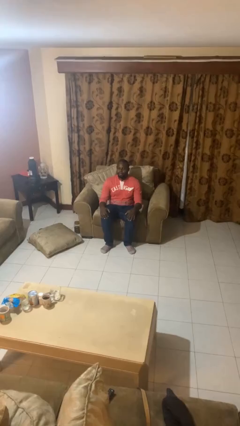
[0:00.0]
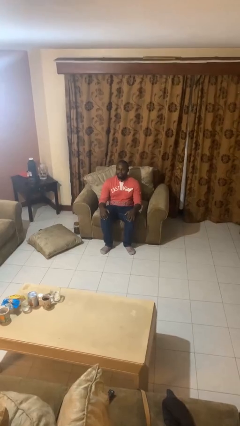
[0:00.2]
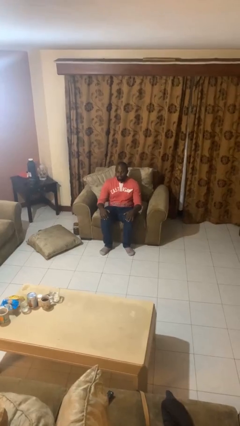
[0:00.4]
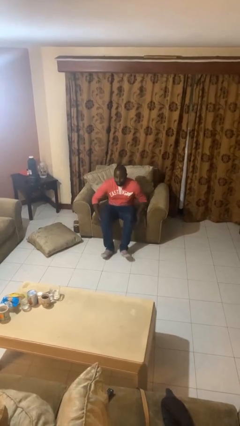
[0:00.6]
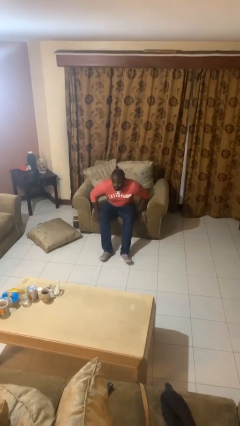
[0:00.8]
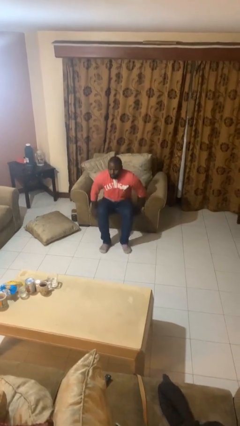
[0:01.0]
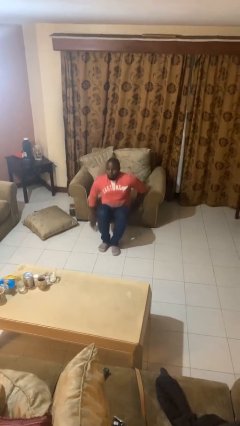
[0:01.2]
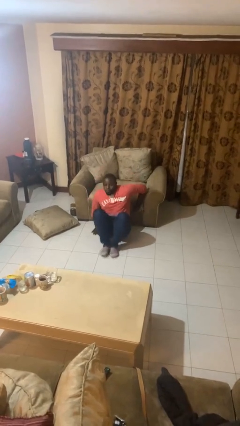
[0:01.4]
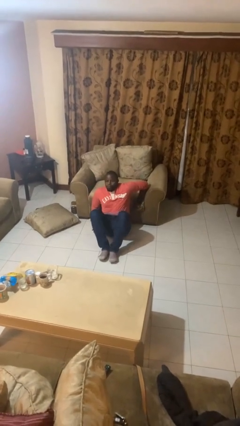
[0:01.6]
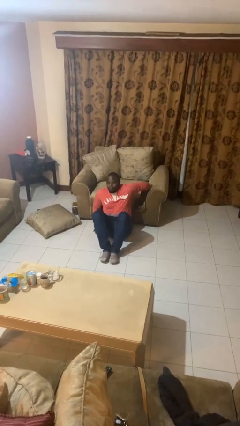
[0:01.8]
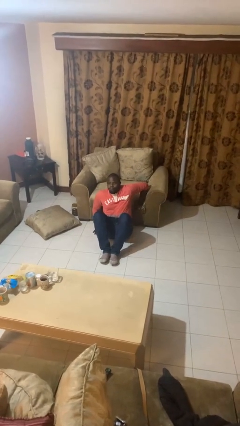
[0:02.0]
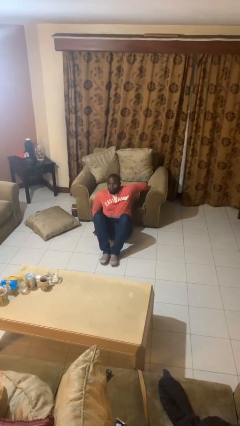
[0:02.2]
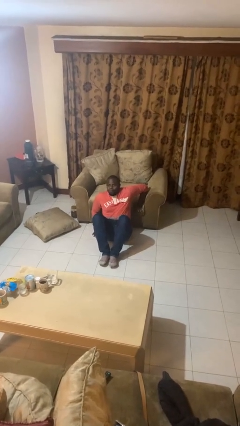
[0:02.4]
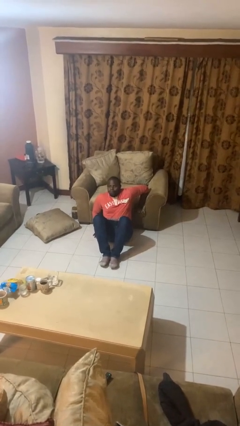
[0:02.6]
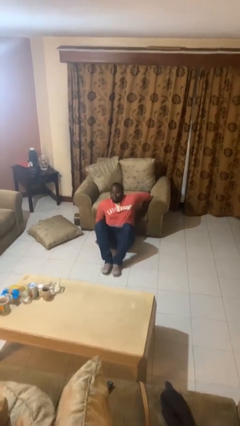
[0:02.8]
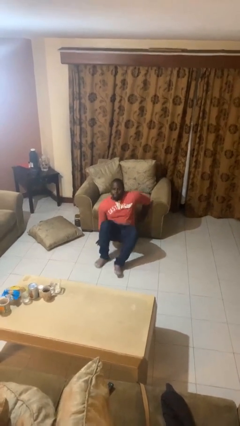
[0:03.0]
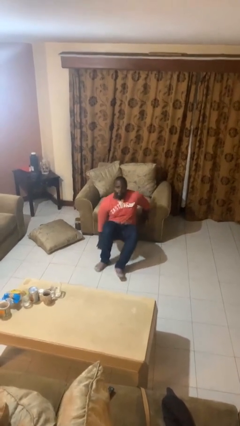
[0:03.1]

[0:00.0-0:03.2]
person falls from chair

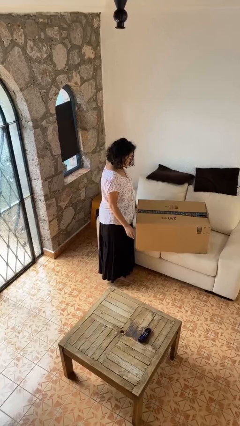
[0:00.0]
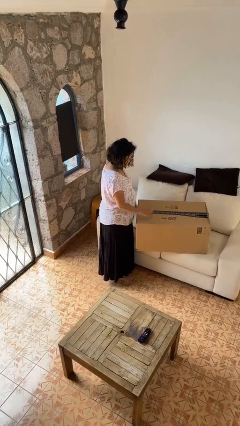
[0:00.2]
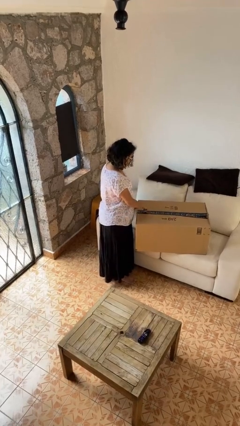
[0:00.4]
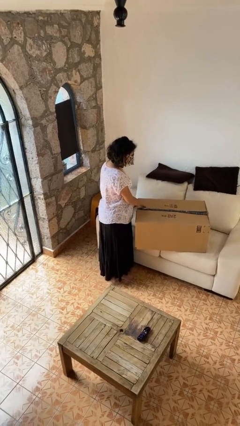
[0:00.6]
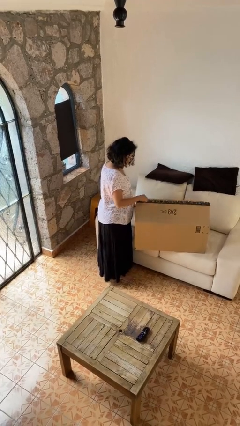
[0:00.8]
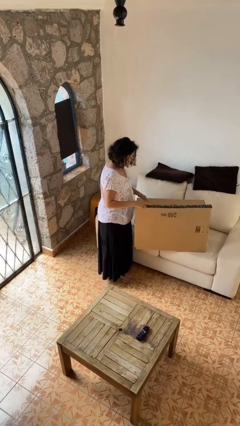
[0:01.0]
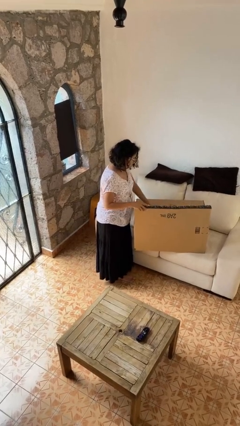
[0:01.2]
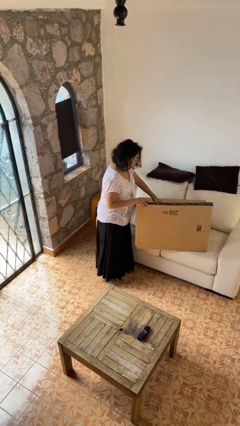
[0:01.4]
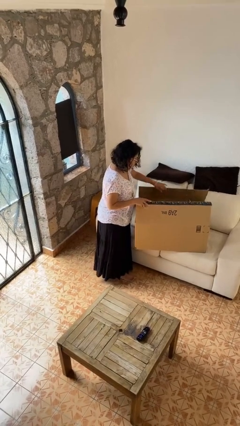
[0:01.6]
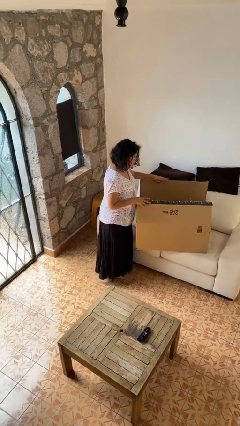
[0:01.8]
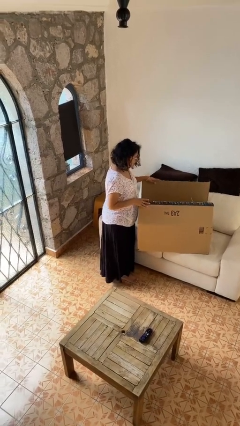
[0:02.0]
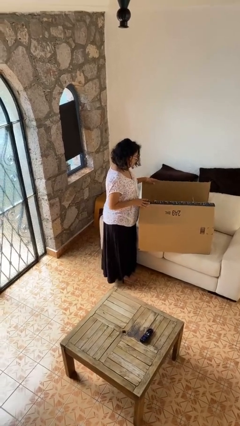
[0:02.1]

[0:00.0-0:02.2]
person opens box

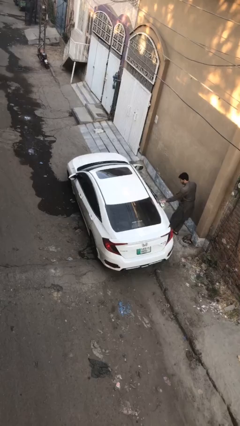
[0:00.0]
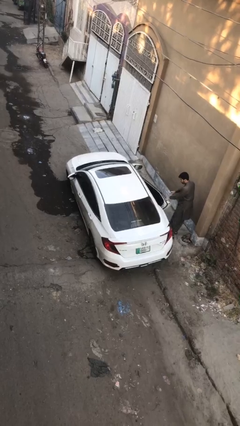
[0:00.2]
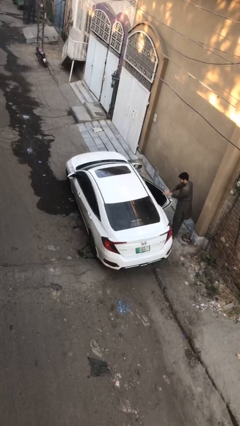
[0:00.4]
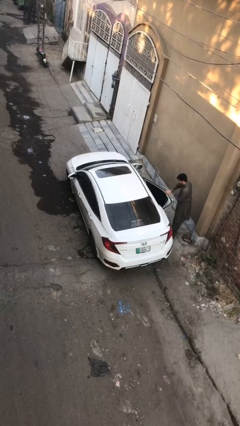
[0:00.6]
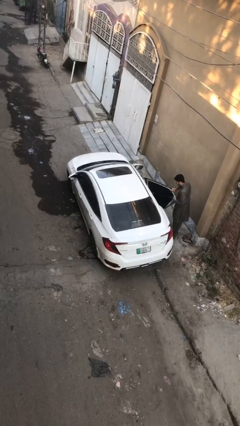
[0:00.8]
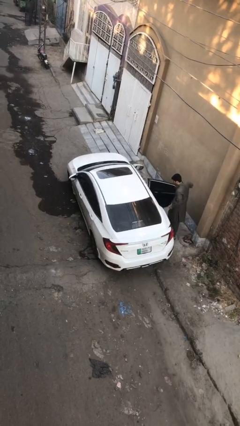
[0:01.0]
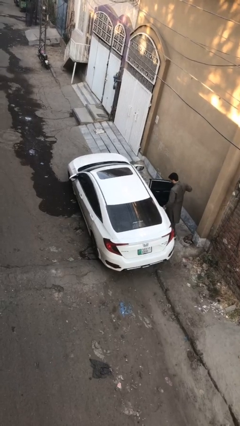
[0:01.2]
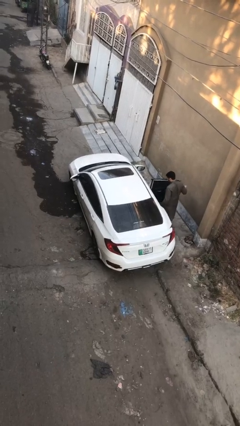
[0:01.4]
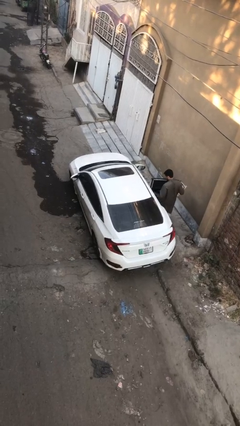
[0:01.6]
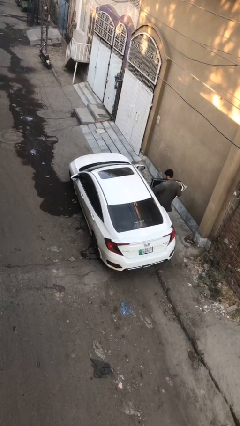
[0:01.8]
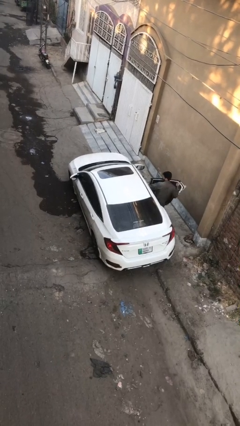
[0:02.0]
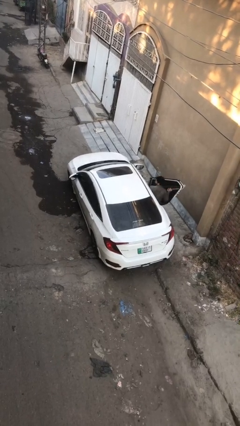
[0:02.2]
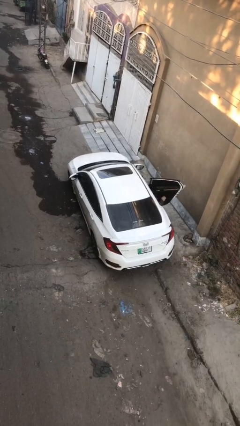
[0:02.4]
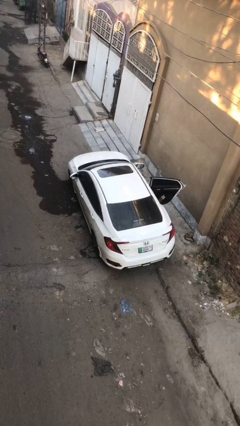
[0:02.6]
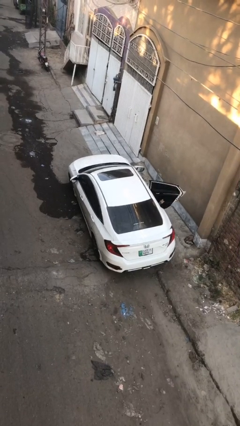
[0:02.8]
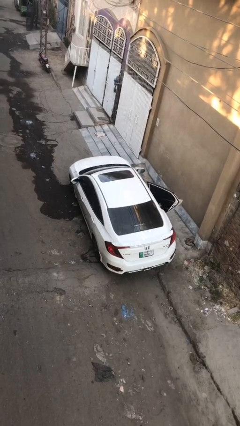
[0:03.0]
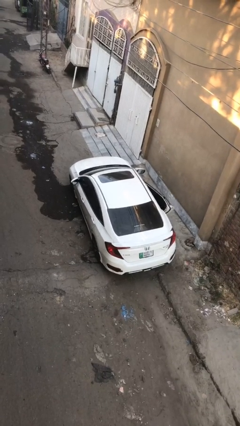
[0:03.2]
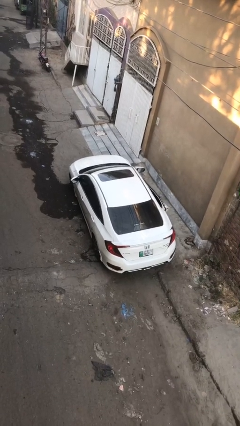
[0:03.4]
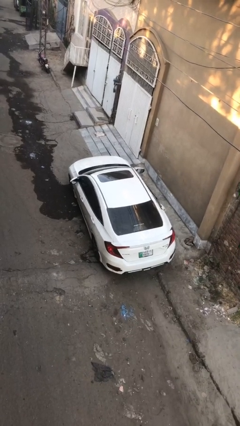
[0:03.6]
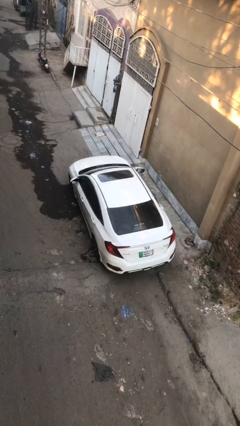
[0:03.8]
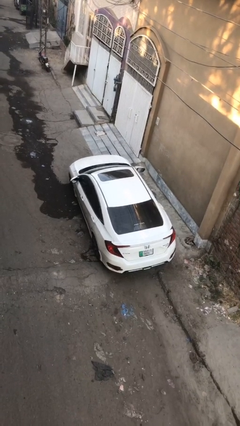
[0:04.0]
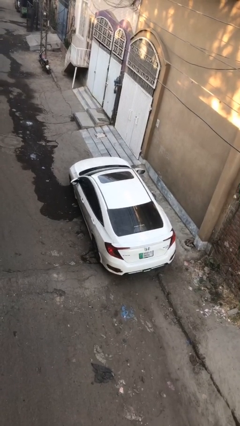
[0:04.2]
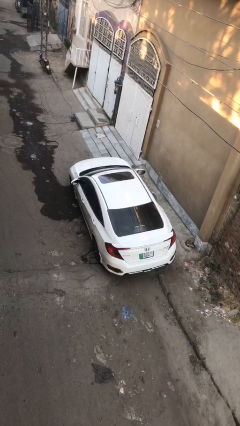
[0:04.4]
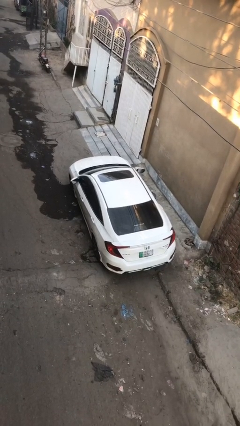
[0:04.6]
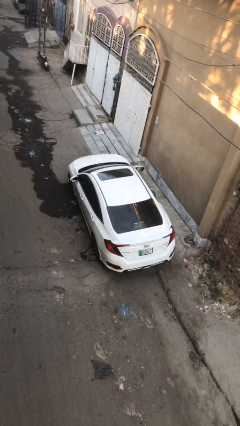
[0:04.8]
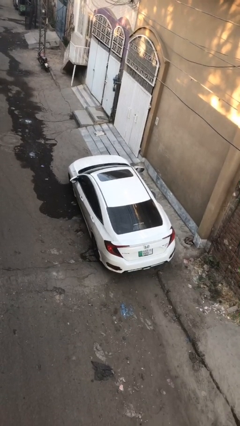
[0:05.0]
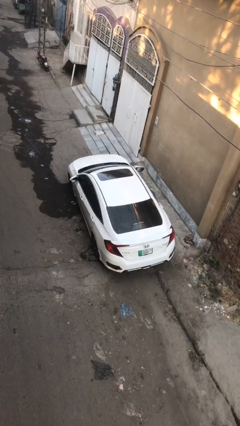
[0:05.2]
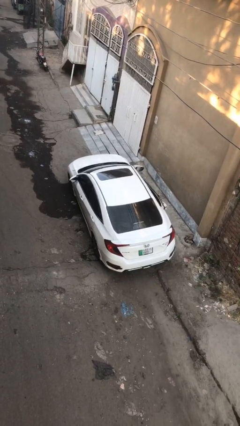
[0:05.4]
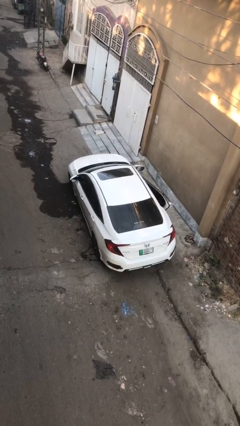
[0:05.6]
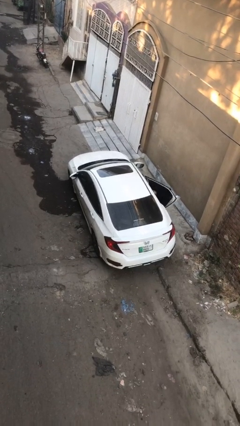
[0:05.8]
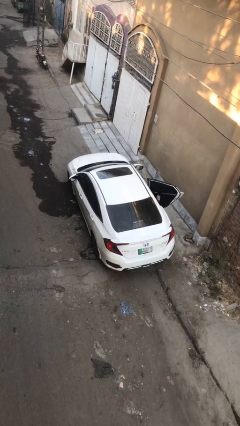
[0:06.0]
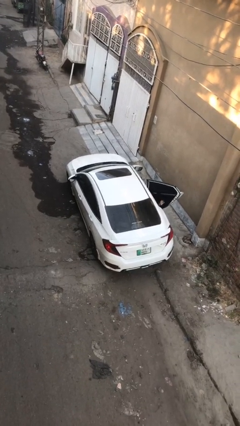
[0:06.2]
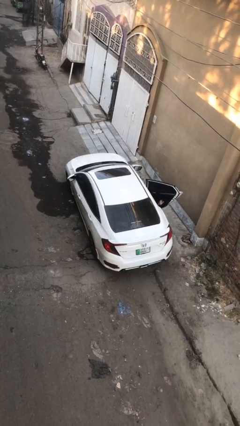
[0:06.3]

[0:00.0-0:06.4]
car picks up person

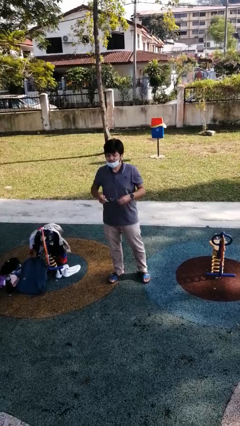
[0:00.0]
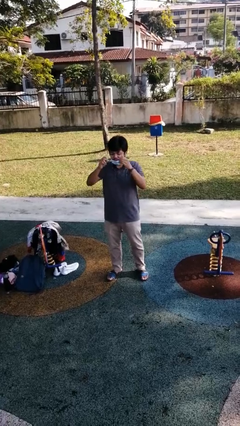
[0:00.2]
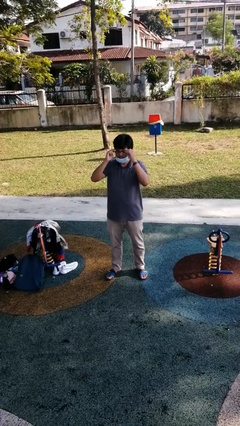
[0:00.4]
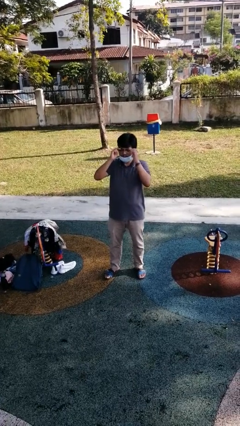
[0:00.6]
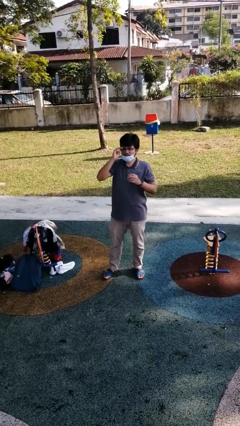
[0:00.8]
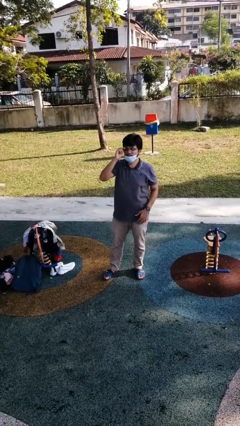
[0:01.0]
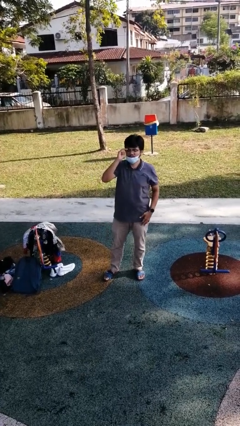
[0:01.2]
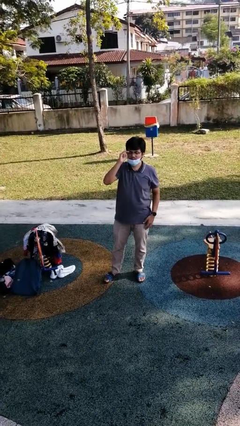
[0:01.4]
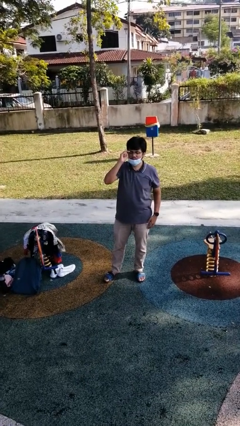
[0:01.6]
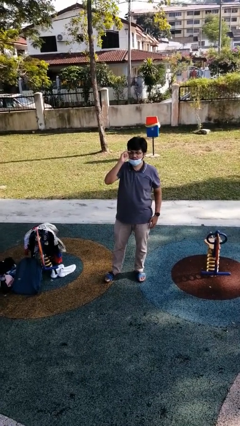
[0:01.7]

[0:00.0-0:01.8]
person puts on glasses

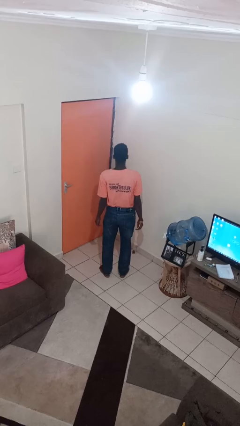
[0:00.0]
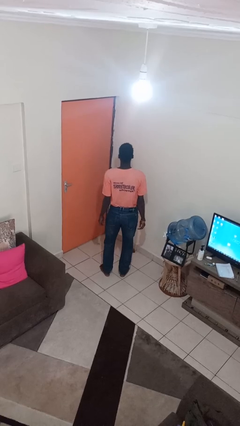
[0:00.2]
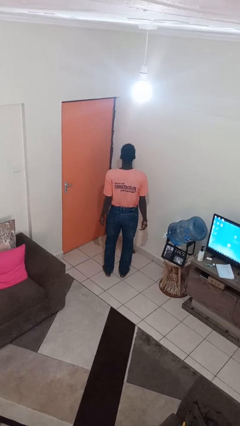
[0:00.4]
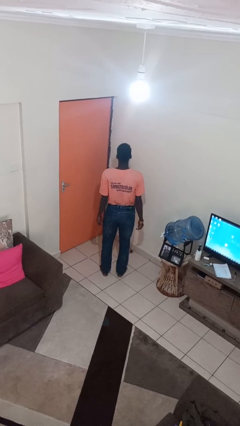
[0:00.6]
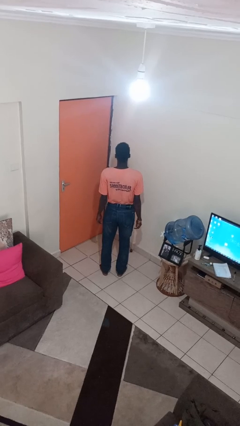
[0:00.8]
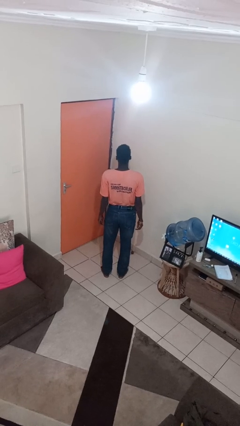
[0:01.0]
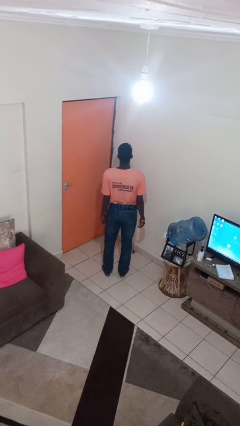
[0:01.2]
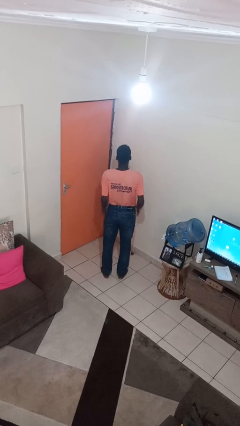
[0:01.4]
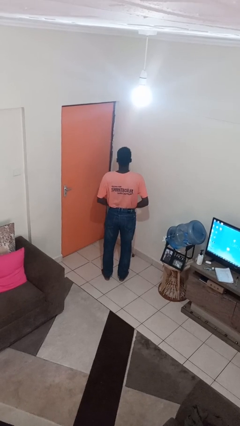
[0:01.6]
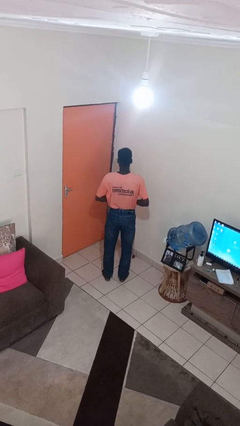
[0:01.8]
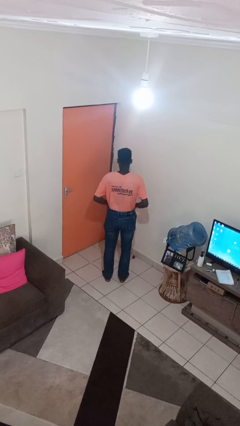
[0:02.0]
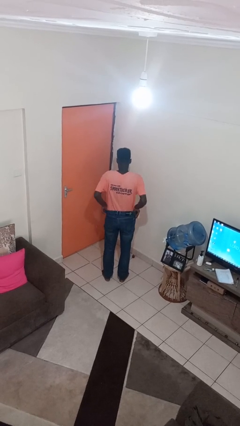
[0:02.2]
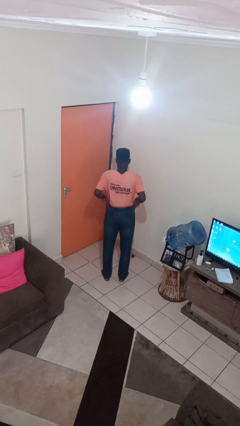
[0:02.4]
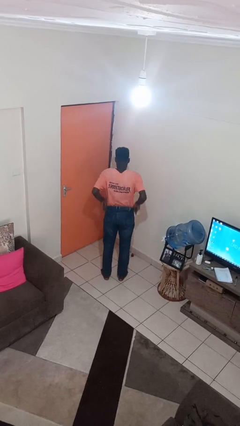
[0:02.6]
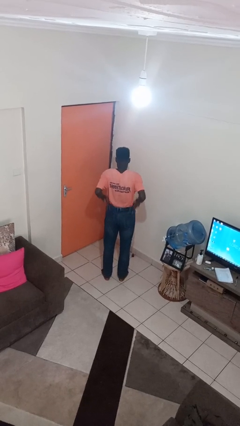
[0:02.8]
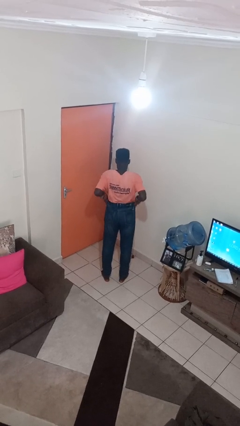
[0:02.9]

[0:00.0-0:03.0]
person hikes up pants

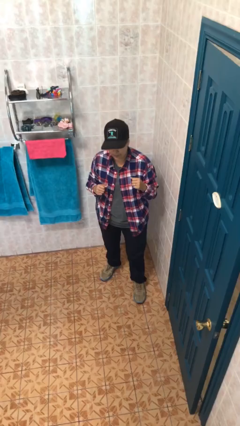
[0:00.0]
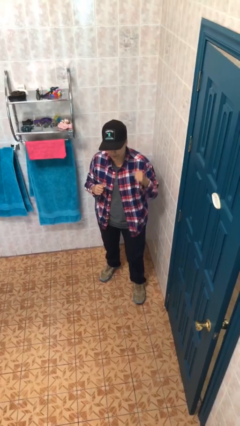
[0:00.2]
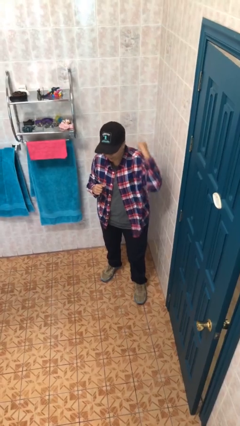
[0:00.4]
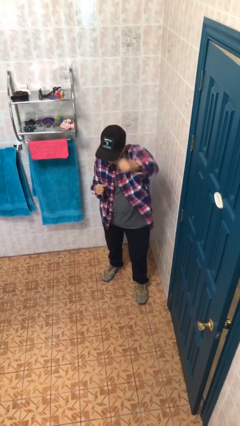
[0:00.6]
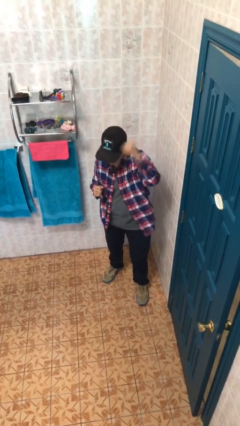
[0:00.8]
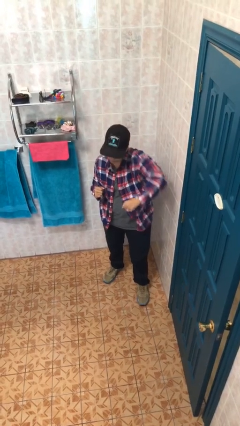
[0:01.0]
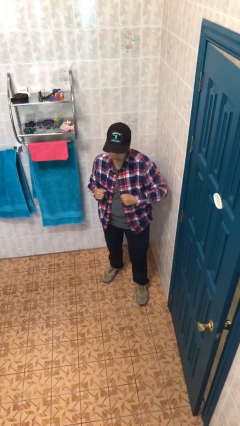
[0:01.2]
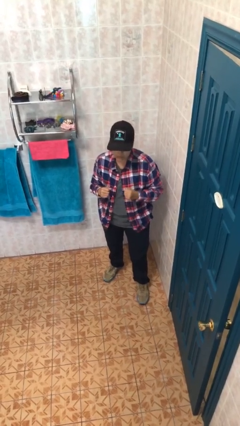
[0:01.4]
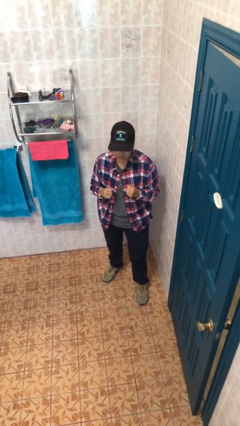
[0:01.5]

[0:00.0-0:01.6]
person punches
